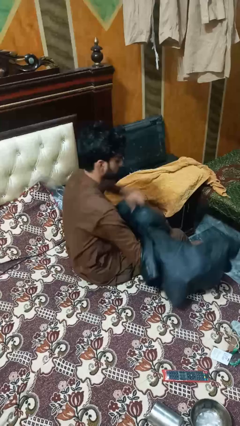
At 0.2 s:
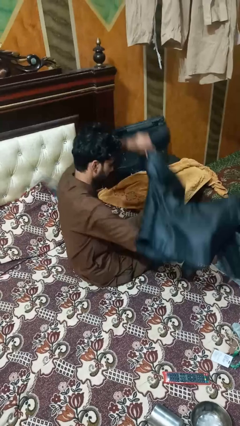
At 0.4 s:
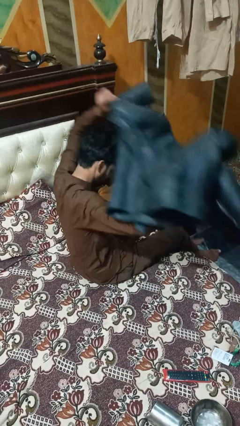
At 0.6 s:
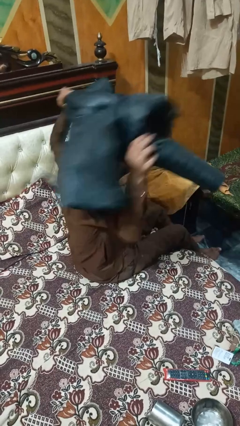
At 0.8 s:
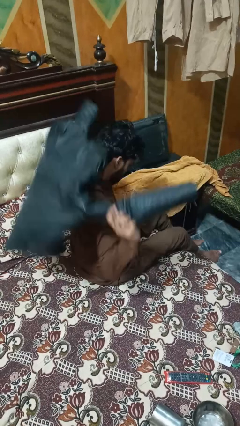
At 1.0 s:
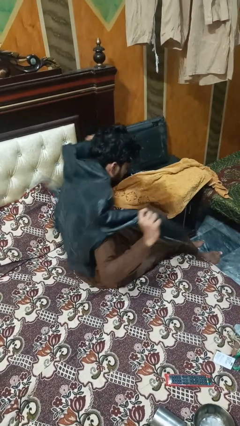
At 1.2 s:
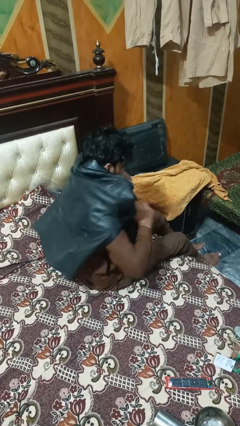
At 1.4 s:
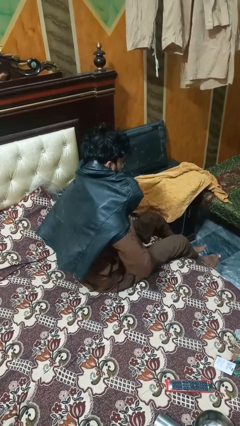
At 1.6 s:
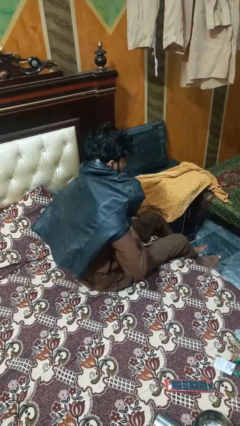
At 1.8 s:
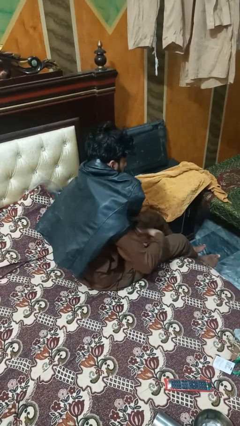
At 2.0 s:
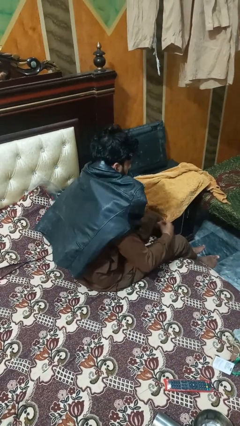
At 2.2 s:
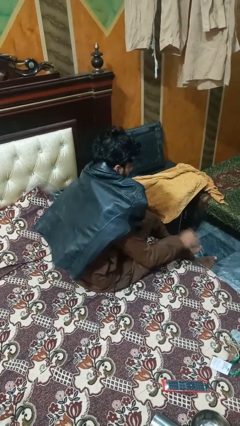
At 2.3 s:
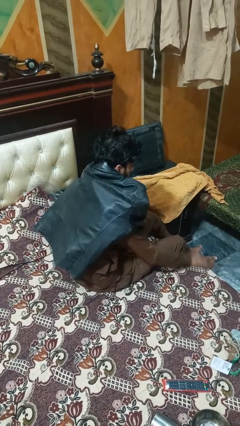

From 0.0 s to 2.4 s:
person ties jacket around waist

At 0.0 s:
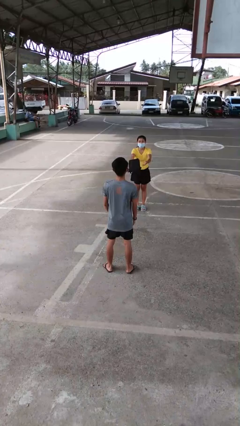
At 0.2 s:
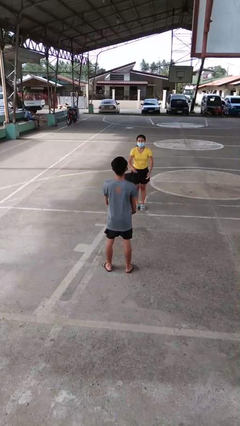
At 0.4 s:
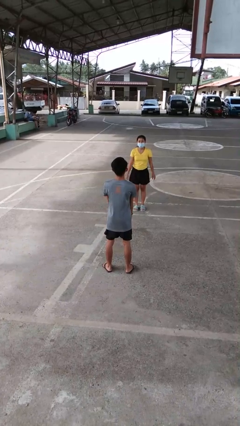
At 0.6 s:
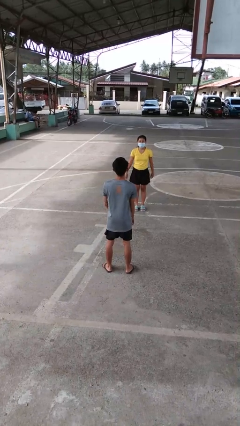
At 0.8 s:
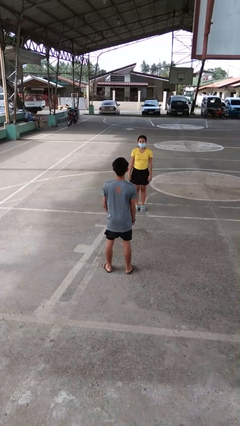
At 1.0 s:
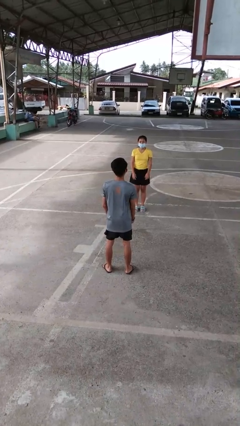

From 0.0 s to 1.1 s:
person catches object from person

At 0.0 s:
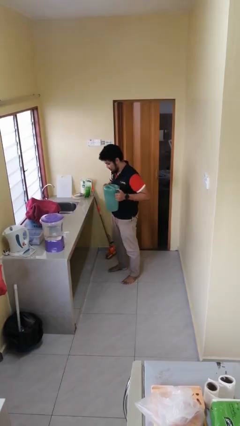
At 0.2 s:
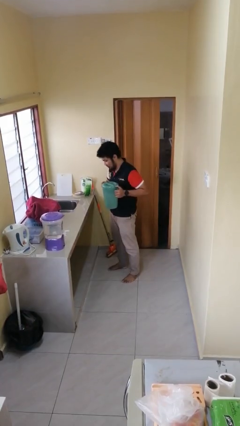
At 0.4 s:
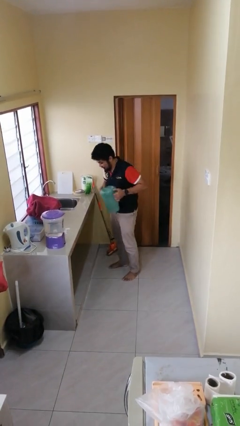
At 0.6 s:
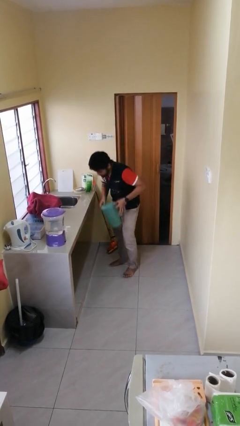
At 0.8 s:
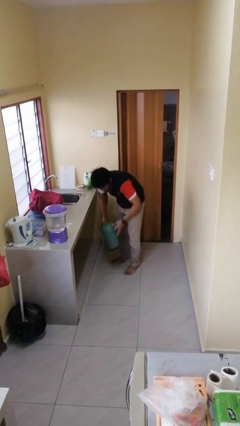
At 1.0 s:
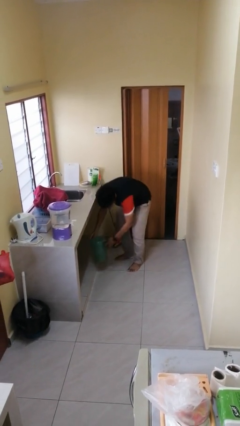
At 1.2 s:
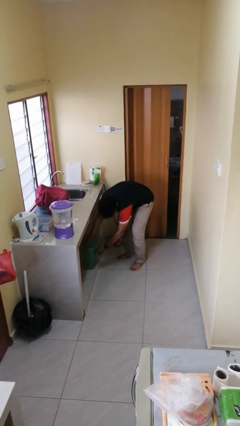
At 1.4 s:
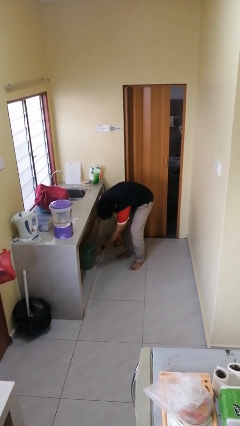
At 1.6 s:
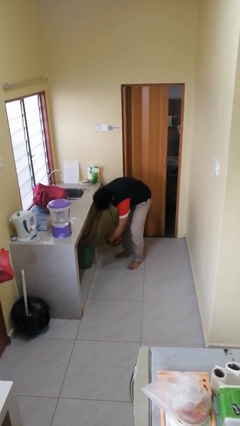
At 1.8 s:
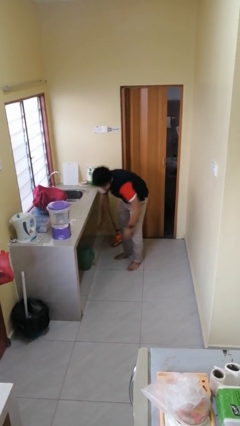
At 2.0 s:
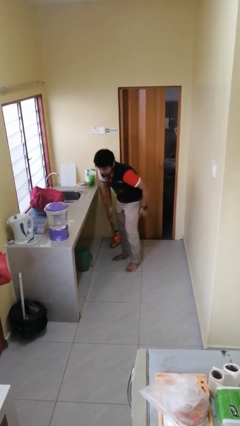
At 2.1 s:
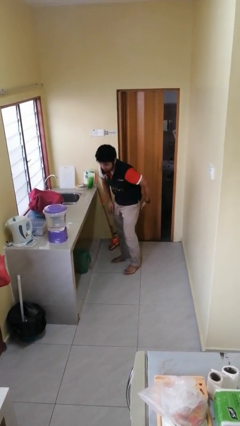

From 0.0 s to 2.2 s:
person puts down object into cabinet

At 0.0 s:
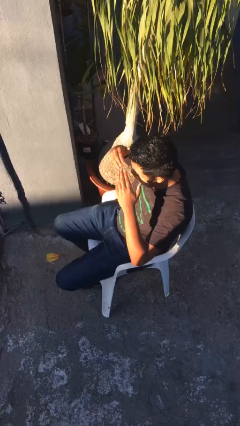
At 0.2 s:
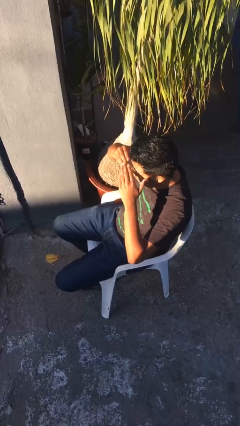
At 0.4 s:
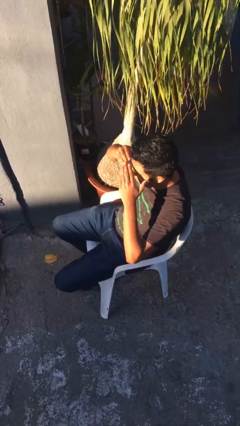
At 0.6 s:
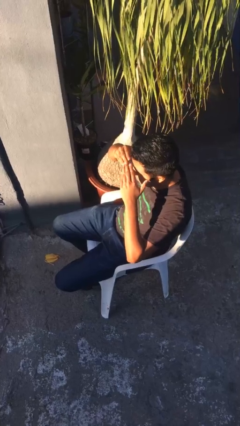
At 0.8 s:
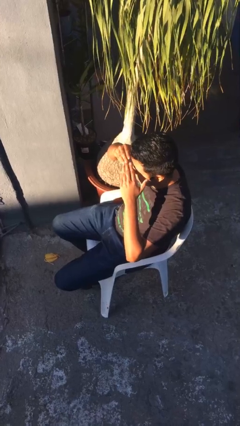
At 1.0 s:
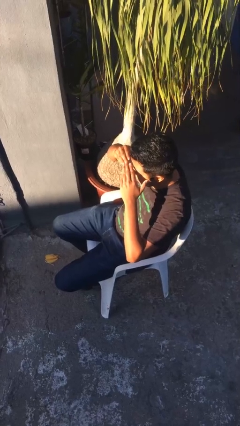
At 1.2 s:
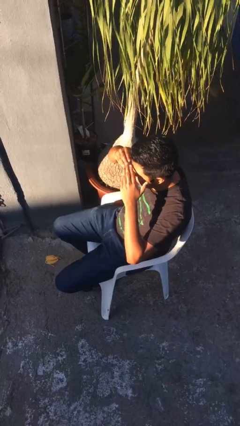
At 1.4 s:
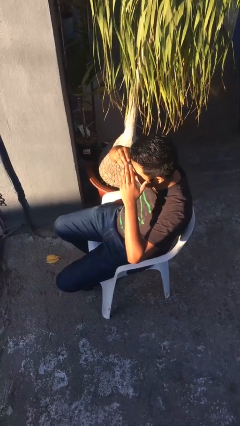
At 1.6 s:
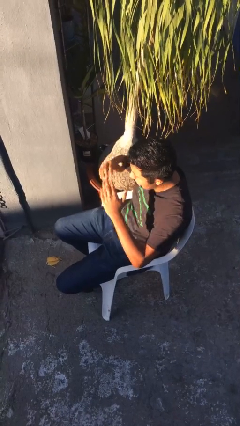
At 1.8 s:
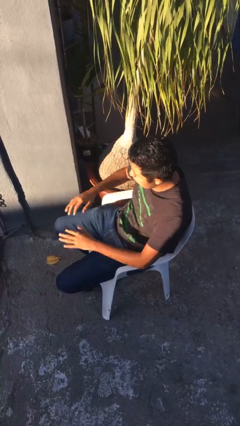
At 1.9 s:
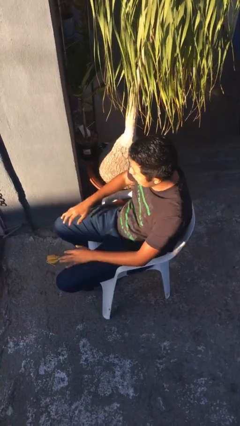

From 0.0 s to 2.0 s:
person shades eyes

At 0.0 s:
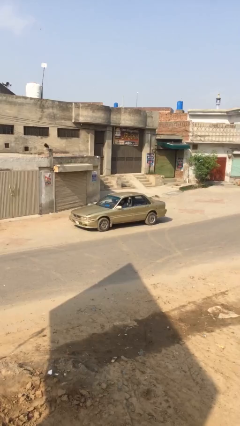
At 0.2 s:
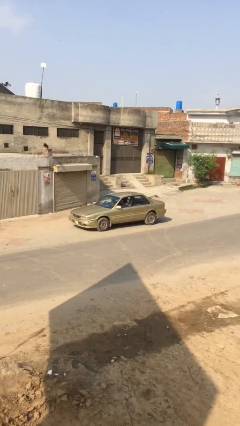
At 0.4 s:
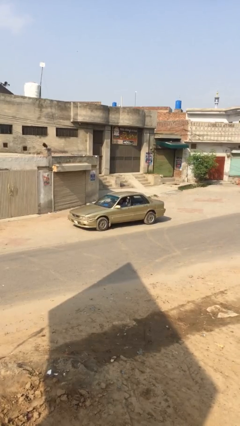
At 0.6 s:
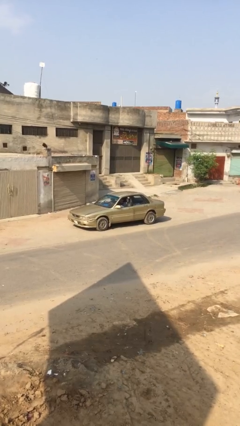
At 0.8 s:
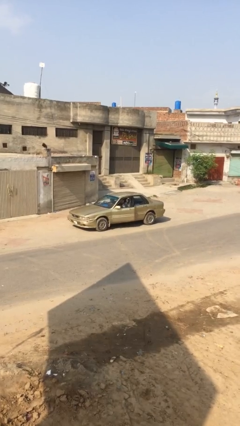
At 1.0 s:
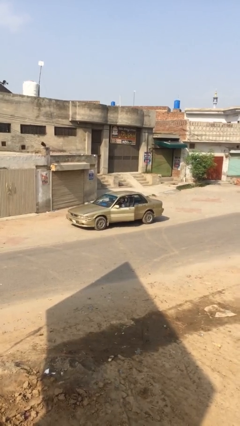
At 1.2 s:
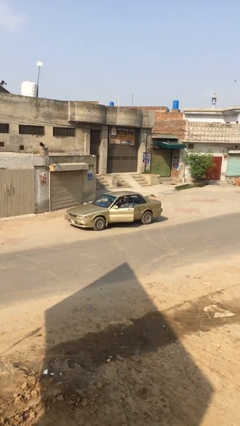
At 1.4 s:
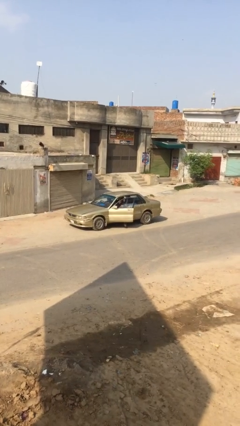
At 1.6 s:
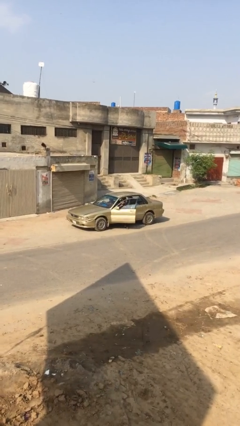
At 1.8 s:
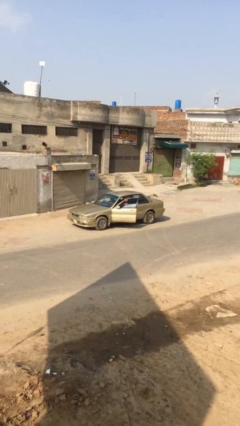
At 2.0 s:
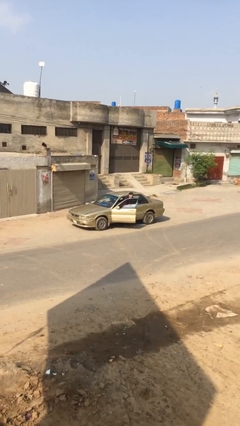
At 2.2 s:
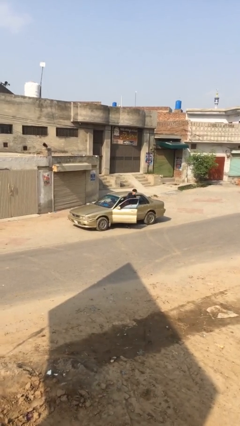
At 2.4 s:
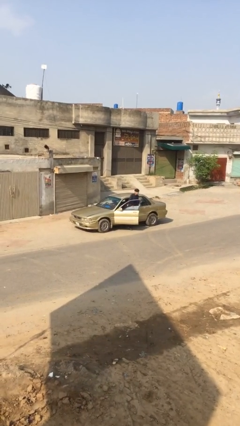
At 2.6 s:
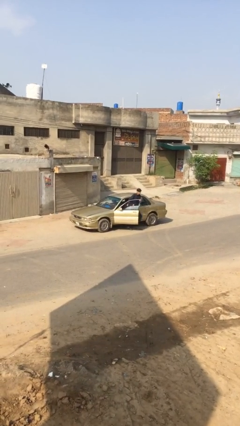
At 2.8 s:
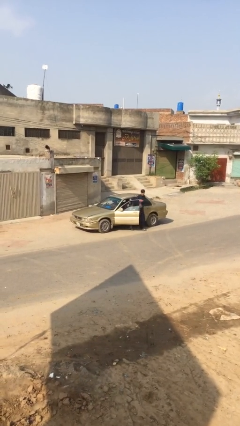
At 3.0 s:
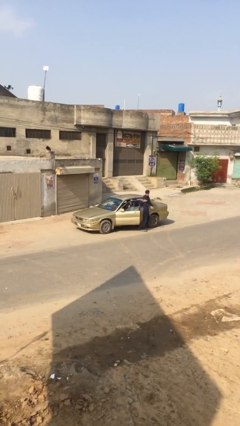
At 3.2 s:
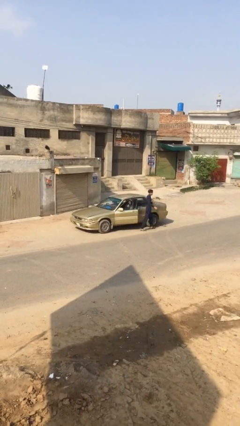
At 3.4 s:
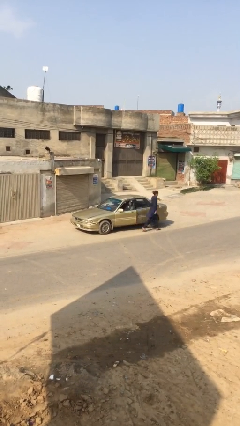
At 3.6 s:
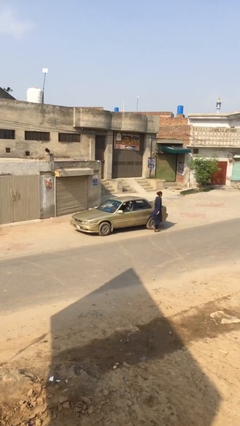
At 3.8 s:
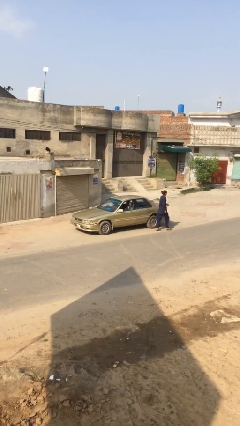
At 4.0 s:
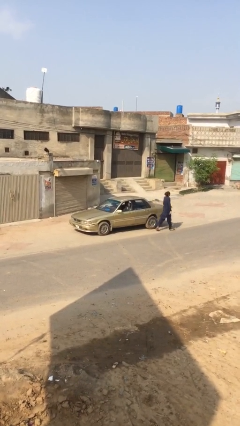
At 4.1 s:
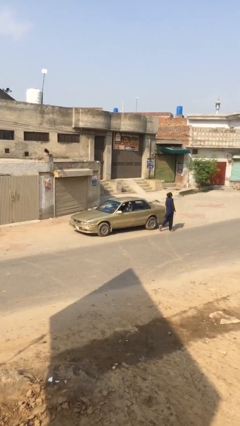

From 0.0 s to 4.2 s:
car drops off person

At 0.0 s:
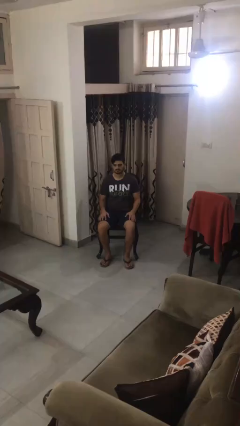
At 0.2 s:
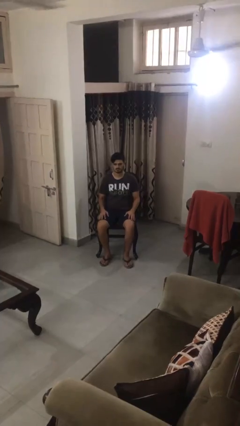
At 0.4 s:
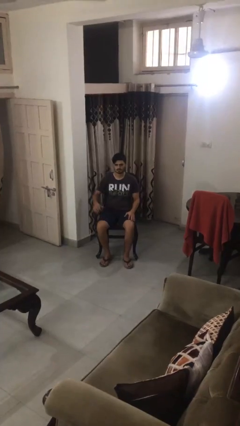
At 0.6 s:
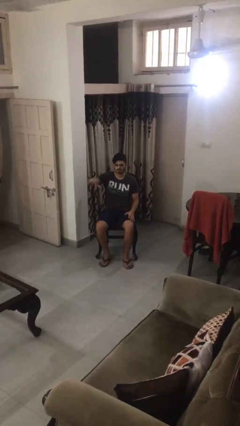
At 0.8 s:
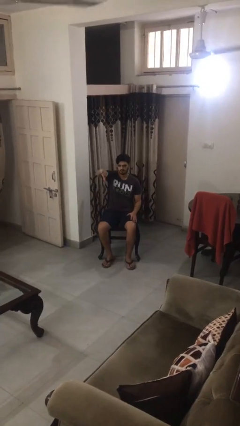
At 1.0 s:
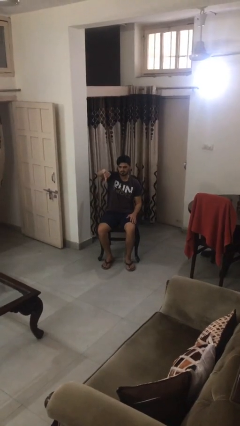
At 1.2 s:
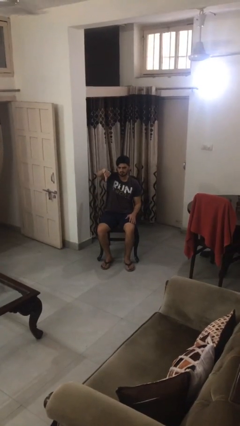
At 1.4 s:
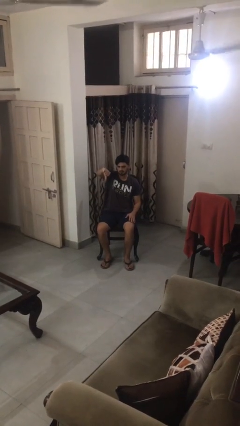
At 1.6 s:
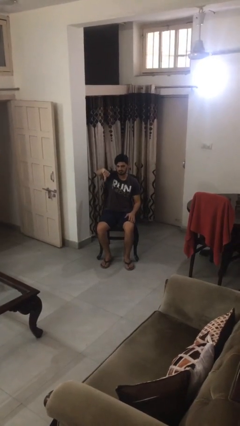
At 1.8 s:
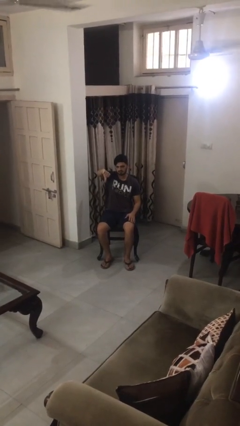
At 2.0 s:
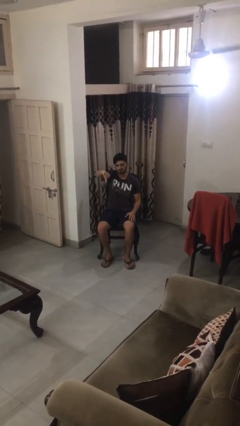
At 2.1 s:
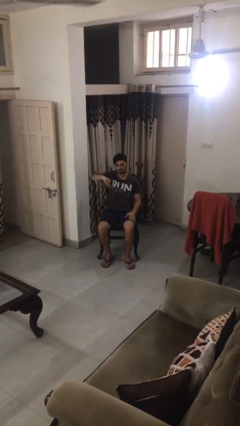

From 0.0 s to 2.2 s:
person gestures thumbs down

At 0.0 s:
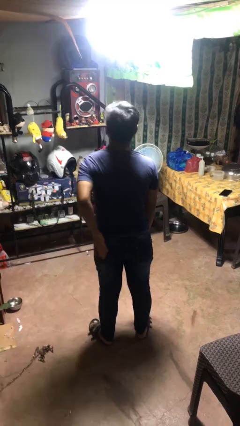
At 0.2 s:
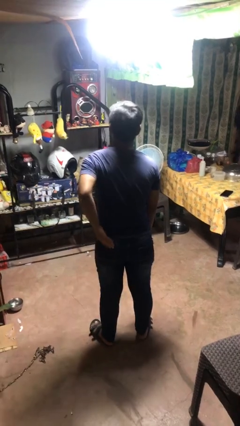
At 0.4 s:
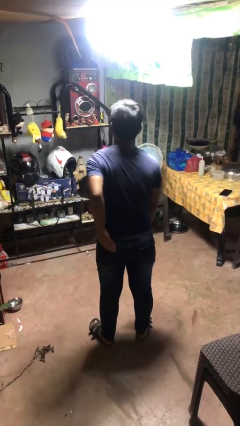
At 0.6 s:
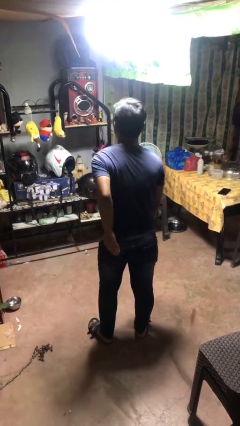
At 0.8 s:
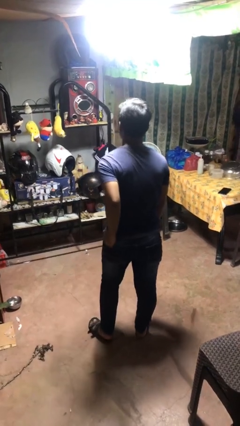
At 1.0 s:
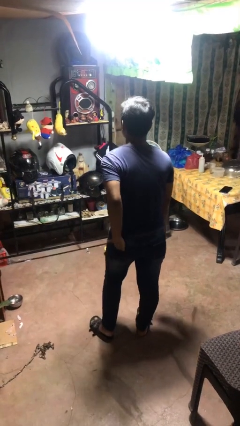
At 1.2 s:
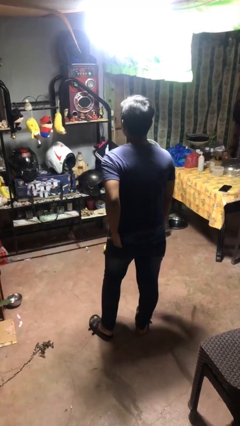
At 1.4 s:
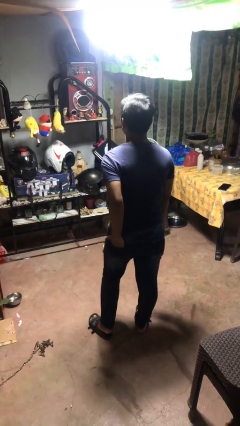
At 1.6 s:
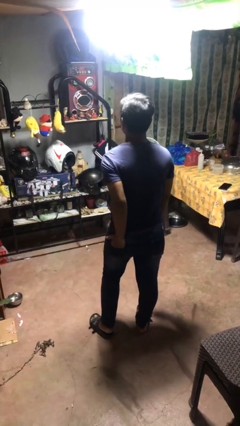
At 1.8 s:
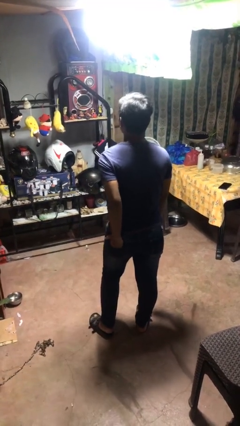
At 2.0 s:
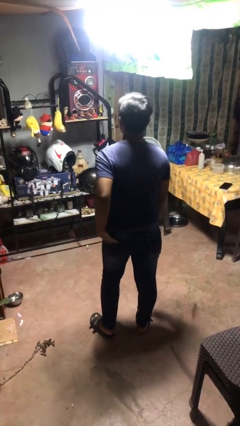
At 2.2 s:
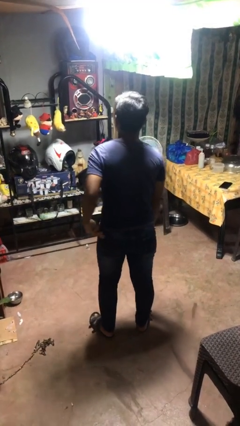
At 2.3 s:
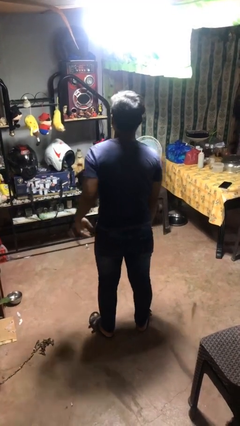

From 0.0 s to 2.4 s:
person puts hands in back pockets

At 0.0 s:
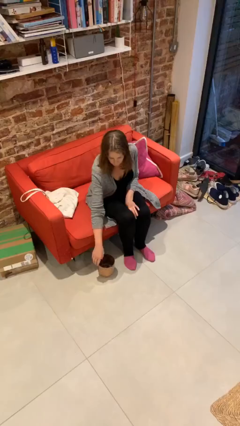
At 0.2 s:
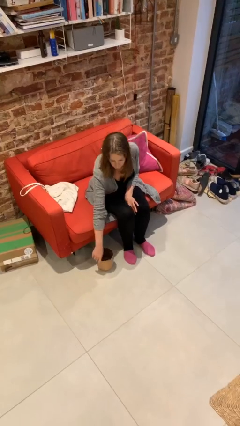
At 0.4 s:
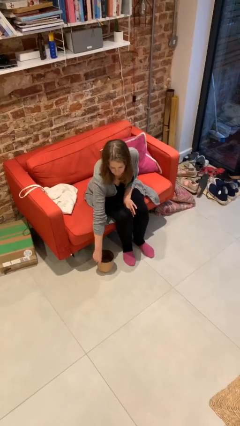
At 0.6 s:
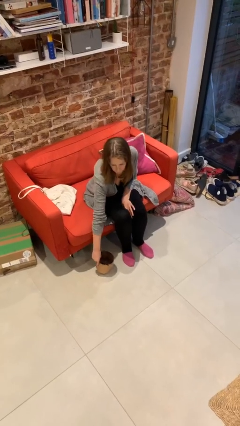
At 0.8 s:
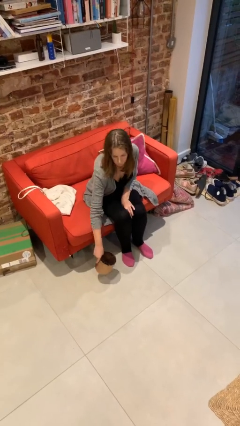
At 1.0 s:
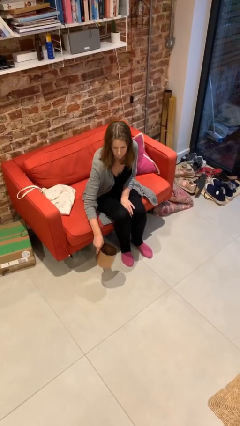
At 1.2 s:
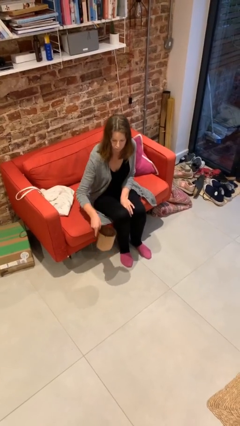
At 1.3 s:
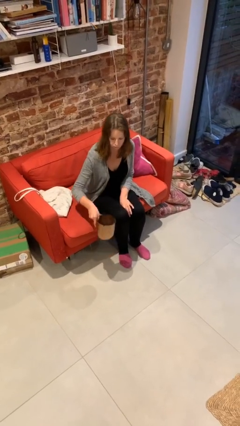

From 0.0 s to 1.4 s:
person picks up object from floor
